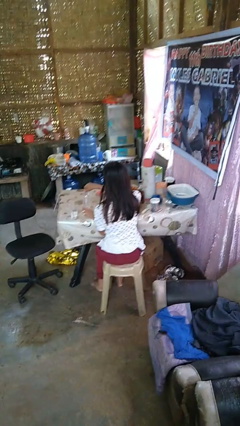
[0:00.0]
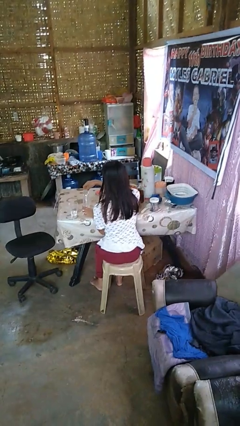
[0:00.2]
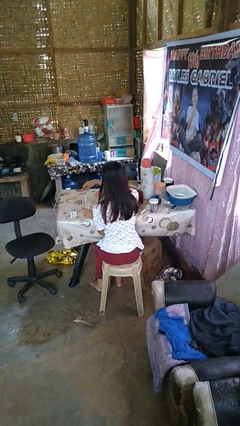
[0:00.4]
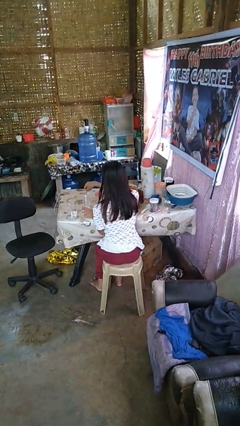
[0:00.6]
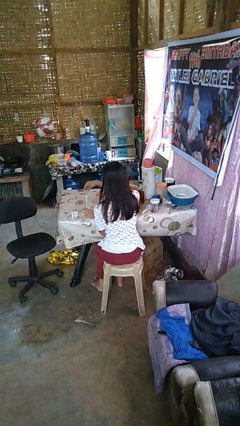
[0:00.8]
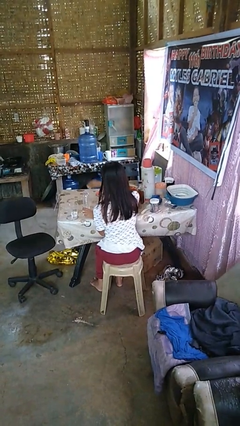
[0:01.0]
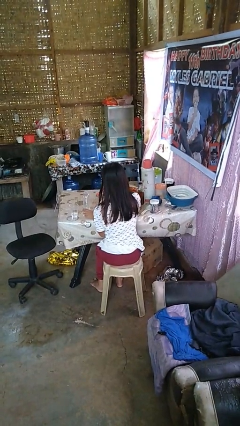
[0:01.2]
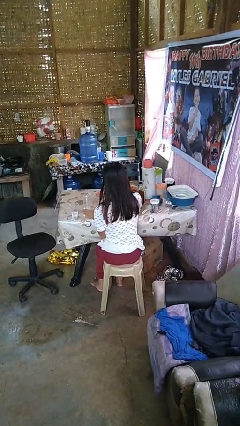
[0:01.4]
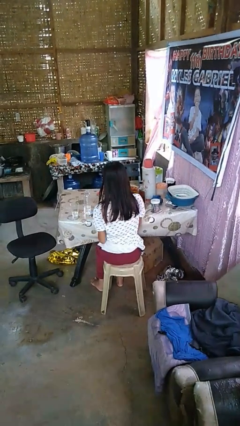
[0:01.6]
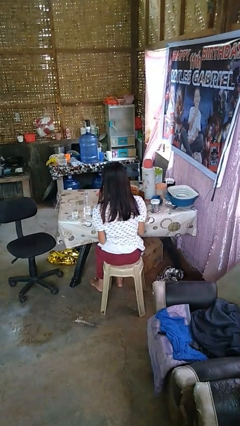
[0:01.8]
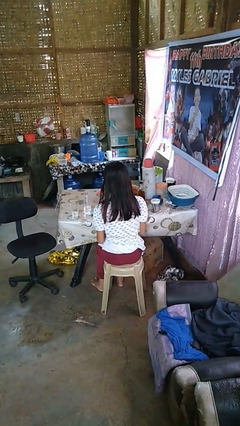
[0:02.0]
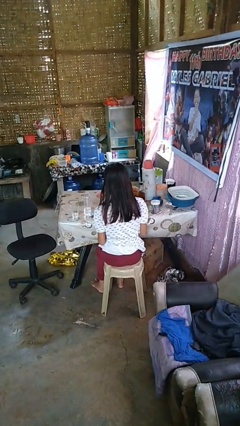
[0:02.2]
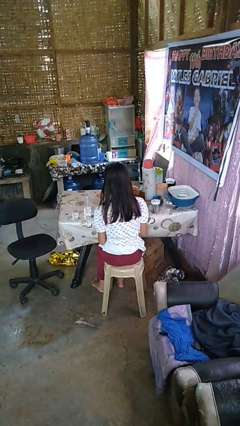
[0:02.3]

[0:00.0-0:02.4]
person unscrews lid from bottle

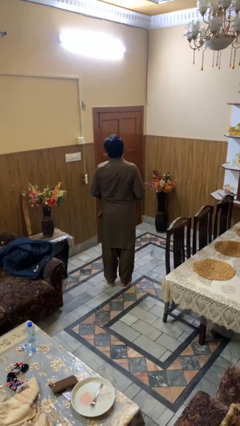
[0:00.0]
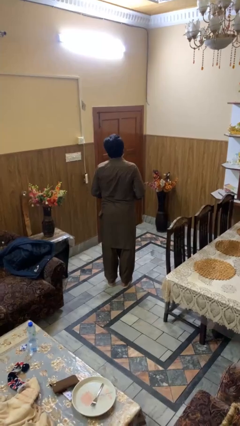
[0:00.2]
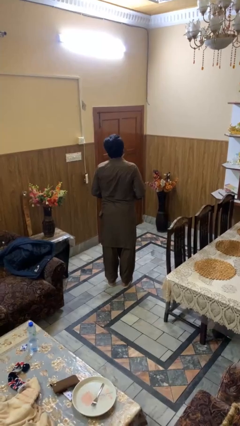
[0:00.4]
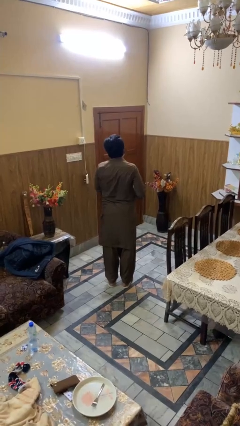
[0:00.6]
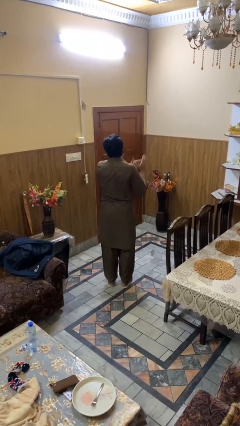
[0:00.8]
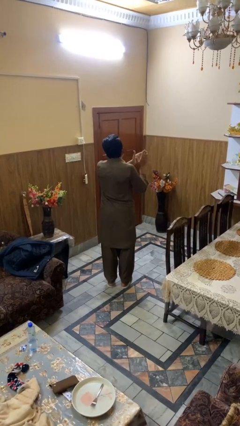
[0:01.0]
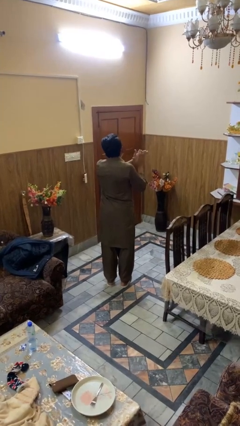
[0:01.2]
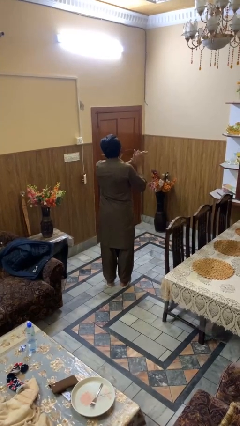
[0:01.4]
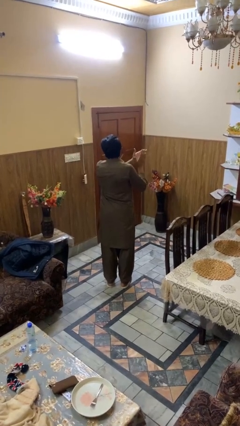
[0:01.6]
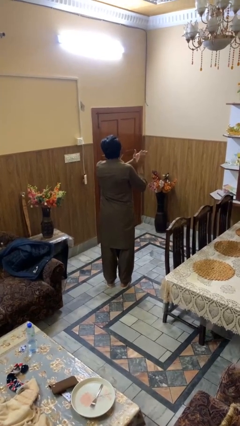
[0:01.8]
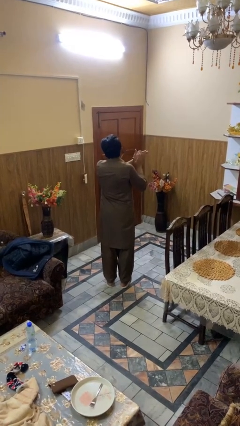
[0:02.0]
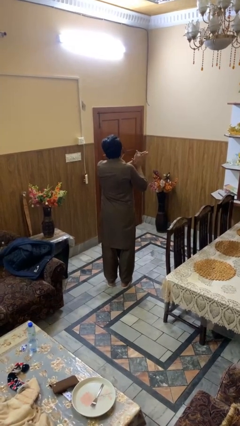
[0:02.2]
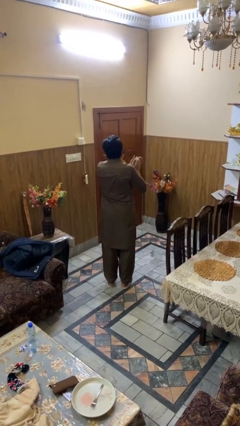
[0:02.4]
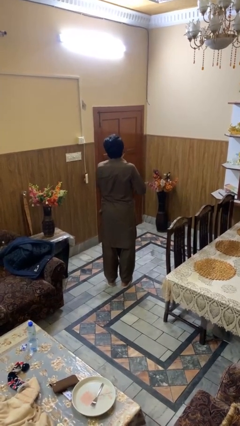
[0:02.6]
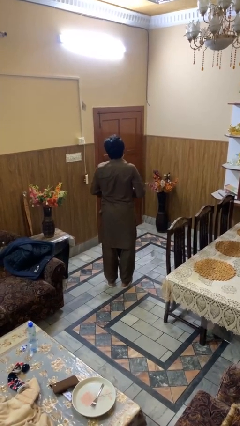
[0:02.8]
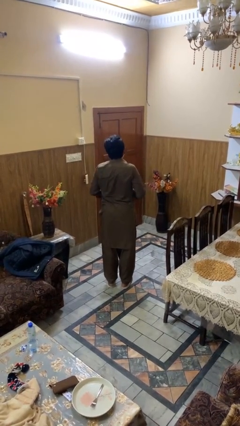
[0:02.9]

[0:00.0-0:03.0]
person claps hands

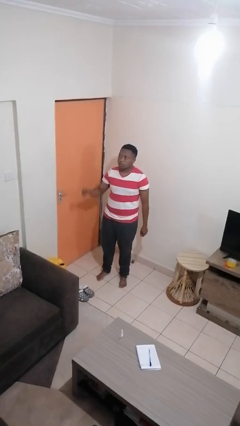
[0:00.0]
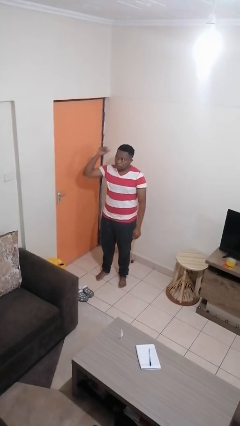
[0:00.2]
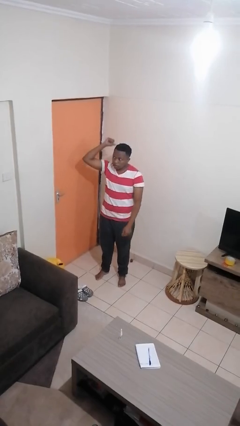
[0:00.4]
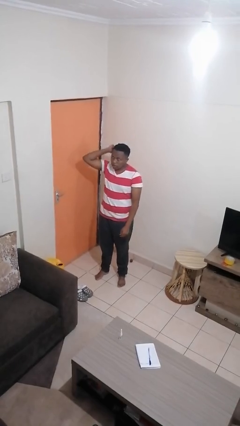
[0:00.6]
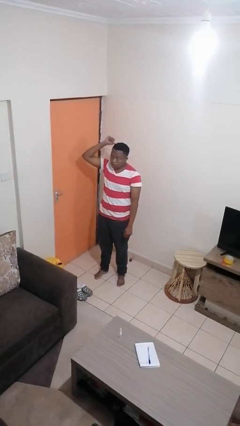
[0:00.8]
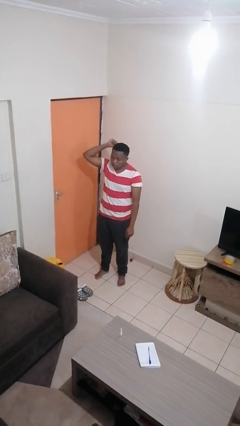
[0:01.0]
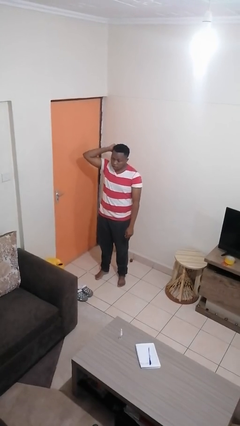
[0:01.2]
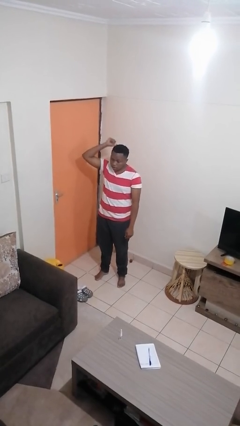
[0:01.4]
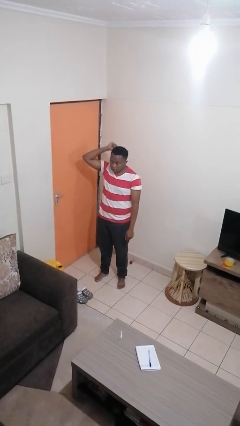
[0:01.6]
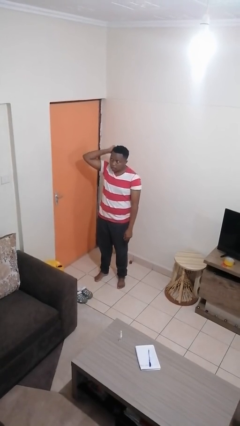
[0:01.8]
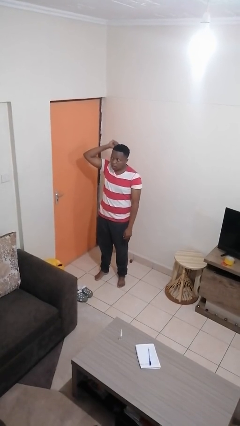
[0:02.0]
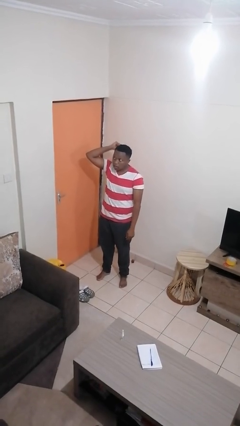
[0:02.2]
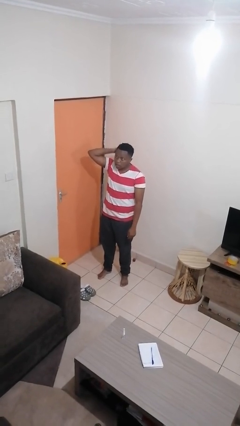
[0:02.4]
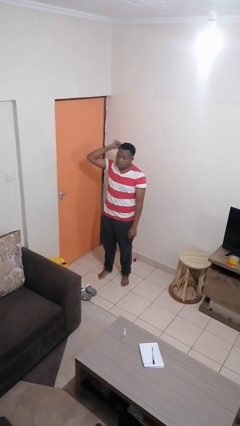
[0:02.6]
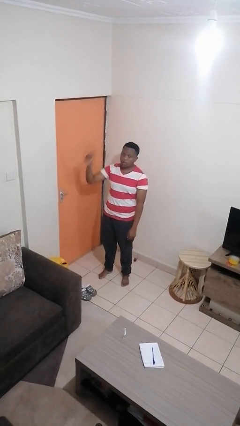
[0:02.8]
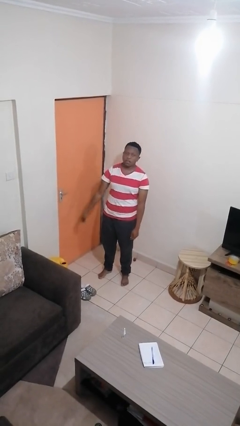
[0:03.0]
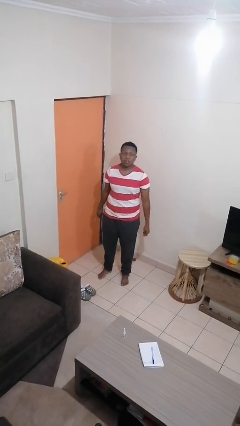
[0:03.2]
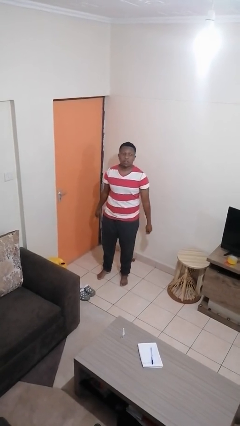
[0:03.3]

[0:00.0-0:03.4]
person gestures behind me

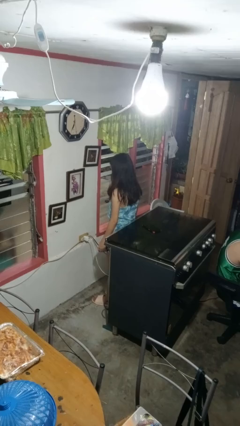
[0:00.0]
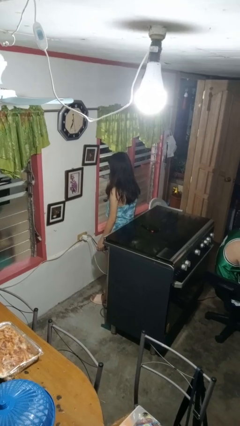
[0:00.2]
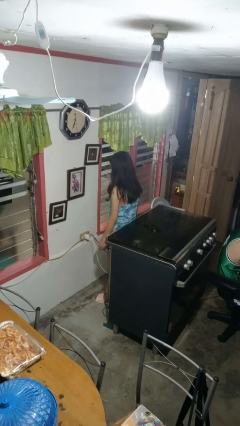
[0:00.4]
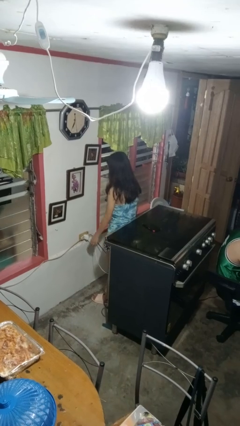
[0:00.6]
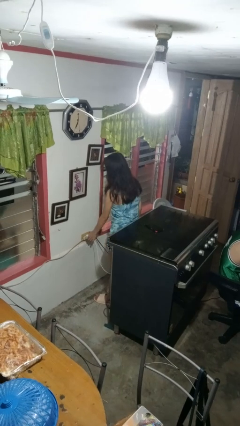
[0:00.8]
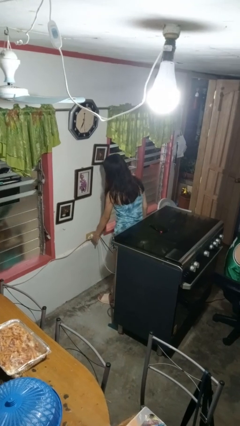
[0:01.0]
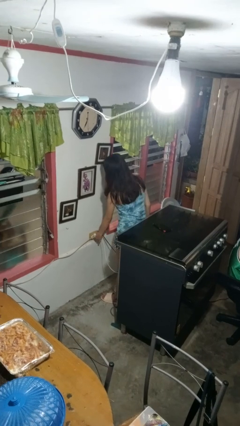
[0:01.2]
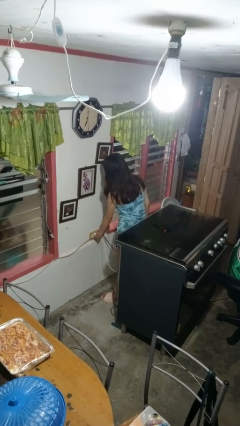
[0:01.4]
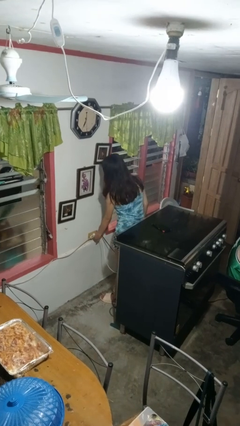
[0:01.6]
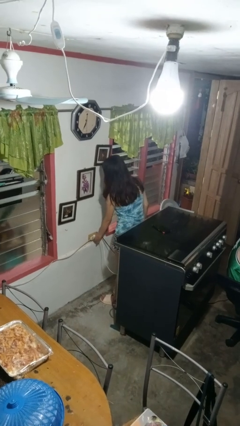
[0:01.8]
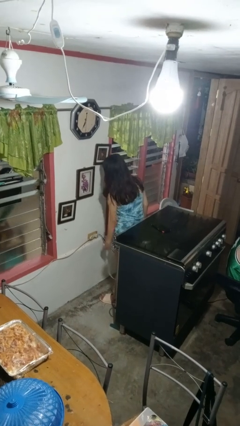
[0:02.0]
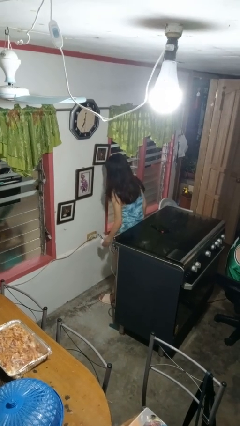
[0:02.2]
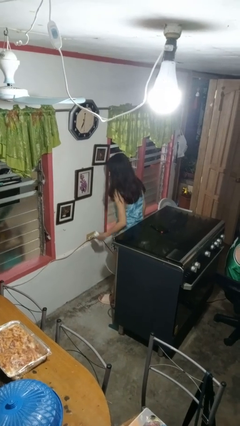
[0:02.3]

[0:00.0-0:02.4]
person unplugs from electrical socket

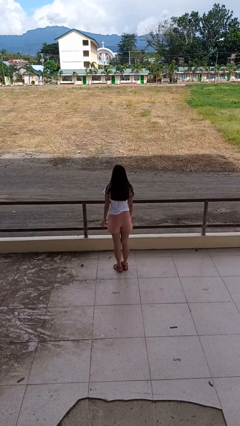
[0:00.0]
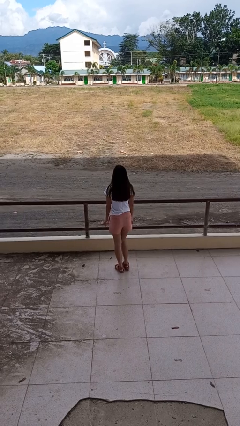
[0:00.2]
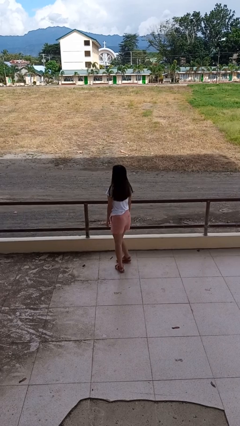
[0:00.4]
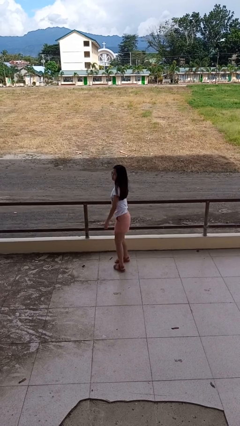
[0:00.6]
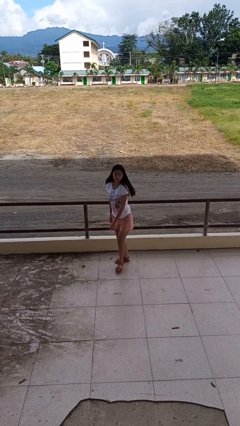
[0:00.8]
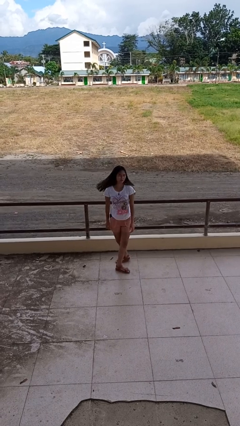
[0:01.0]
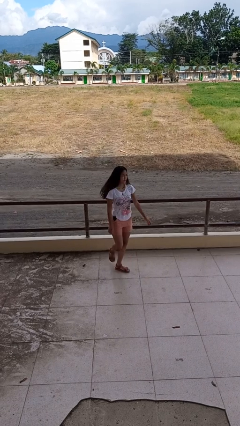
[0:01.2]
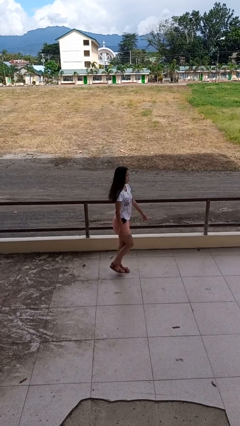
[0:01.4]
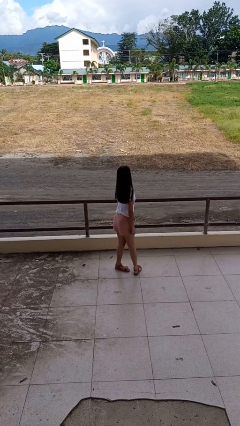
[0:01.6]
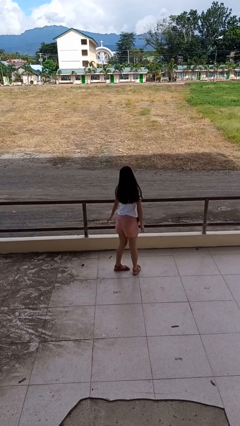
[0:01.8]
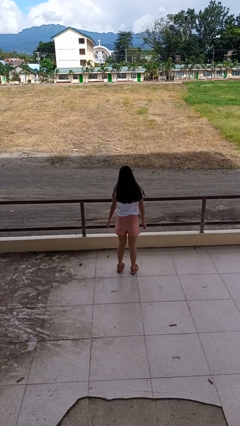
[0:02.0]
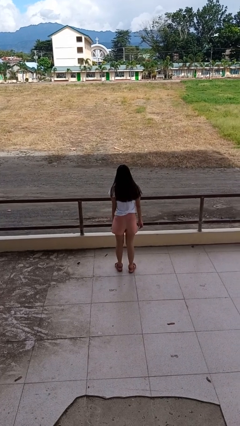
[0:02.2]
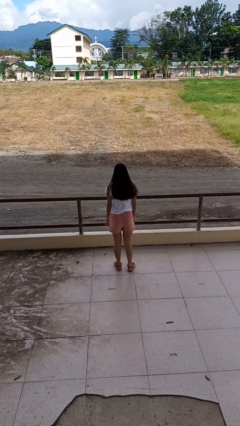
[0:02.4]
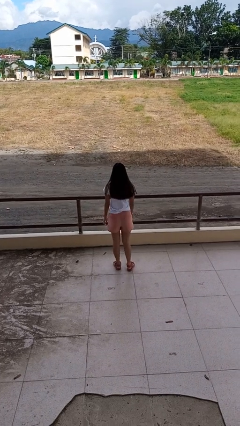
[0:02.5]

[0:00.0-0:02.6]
person twirls

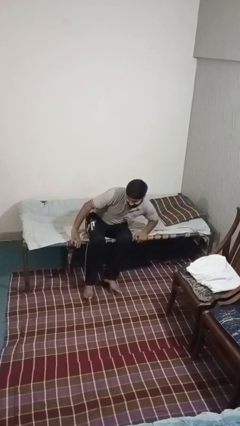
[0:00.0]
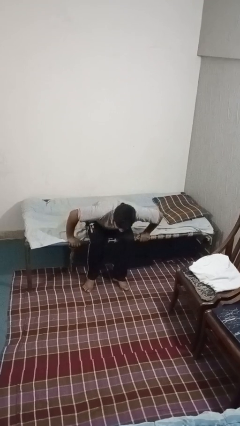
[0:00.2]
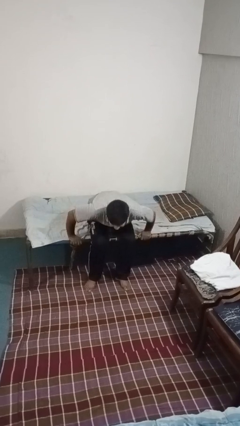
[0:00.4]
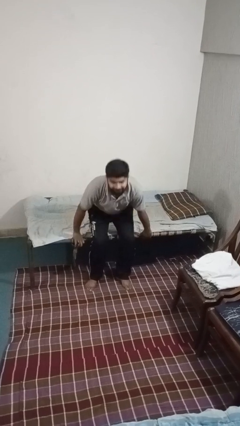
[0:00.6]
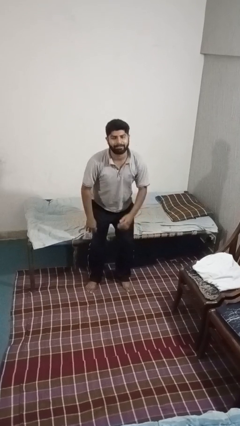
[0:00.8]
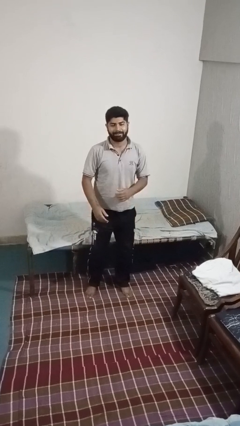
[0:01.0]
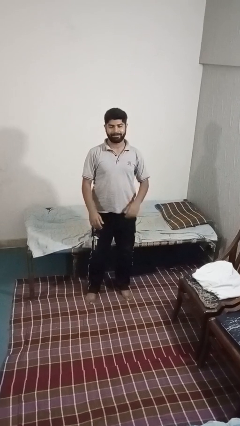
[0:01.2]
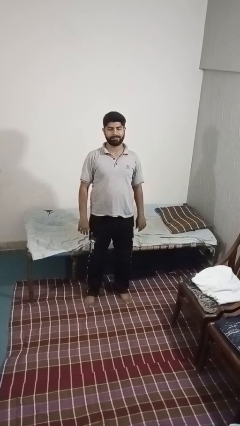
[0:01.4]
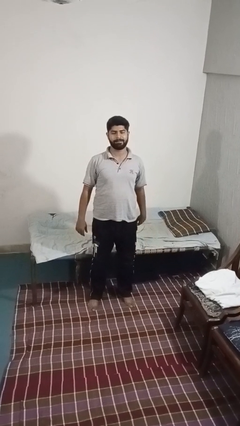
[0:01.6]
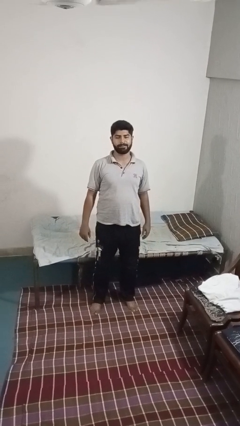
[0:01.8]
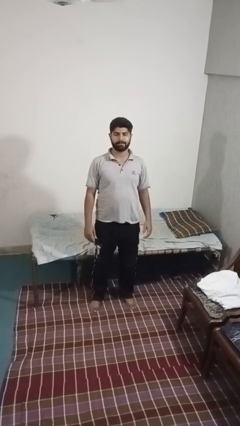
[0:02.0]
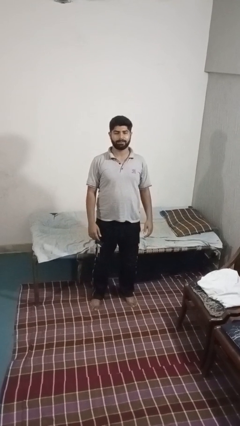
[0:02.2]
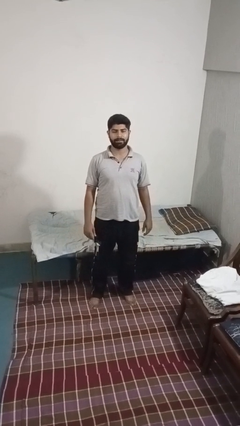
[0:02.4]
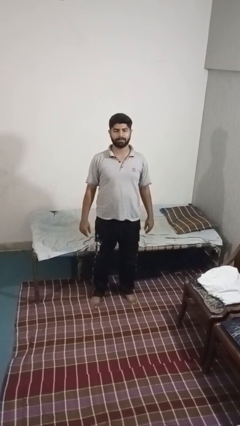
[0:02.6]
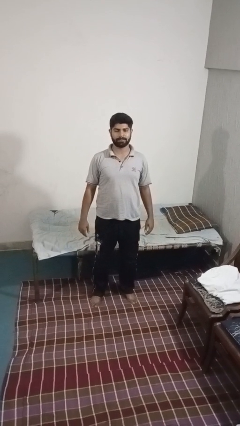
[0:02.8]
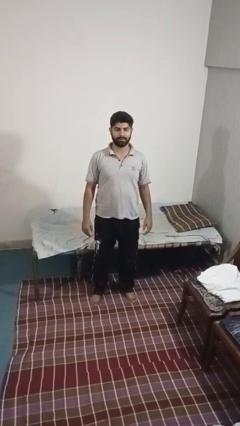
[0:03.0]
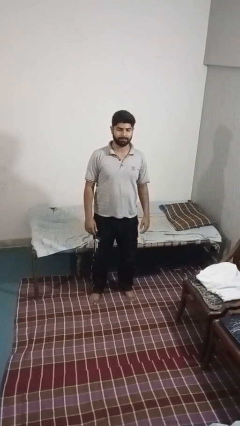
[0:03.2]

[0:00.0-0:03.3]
person stands up

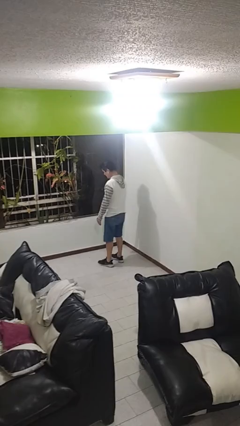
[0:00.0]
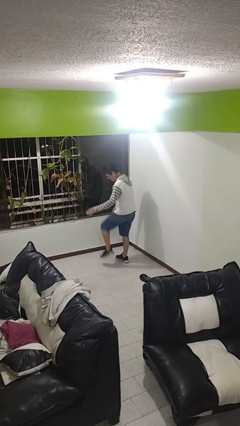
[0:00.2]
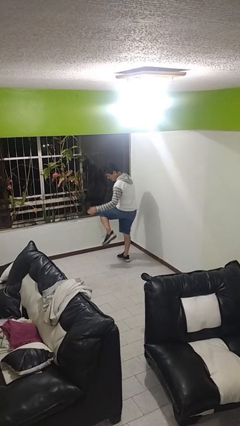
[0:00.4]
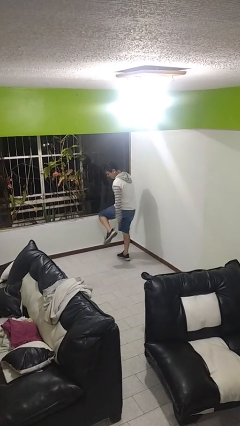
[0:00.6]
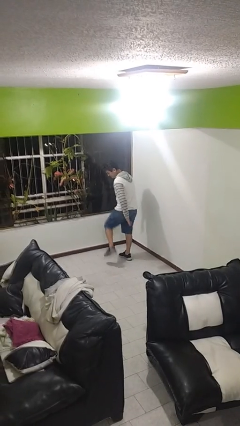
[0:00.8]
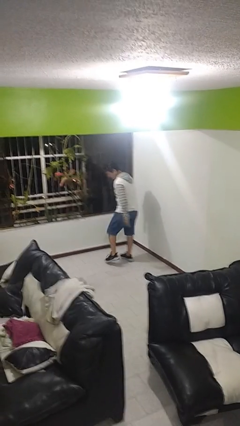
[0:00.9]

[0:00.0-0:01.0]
person swats bug
